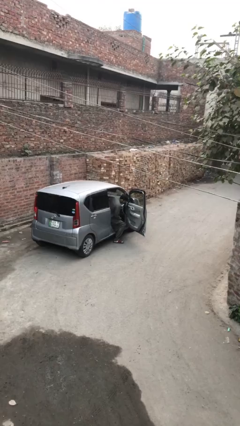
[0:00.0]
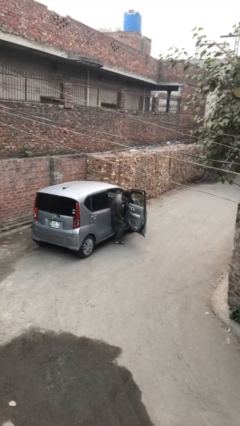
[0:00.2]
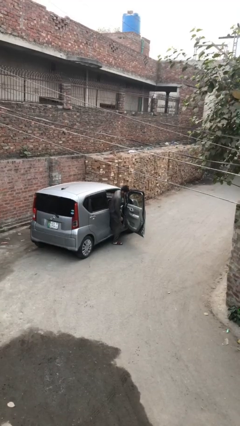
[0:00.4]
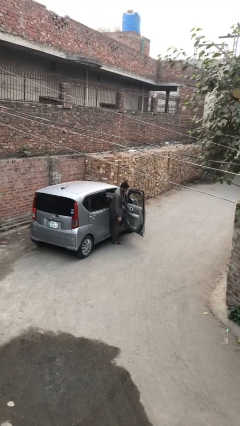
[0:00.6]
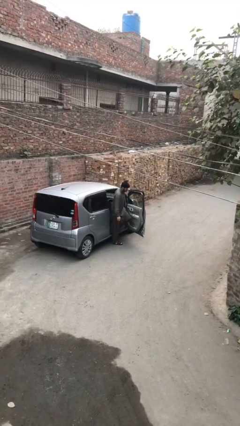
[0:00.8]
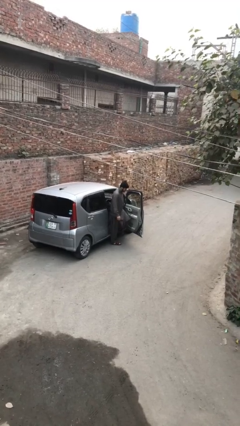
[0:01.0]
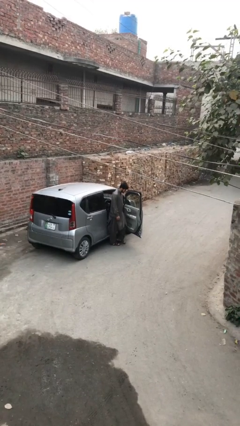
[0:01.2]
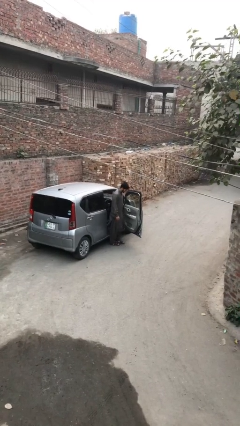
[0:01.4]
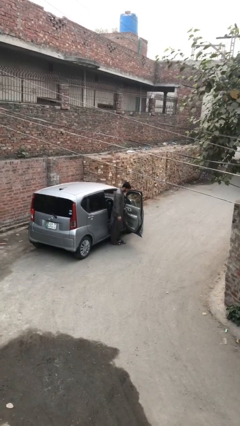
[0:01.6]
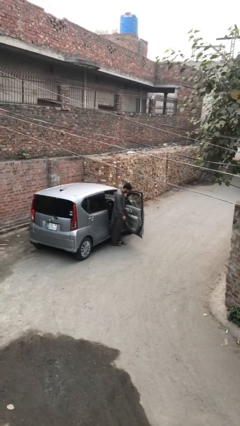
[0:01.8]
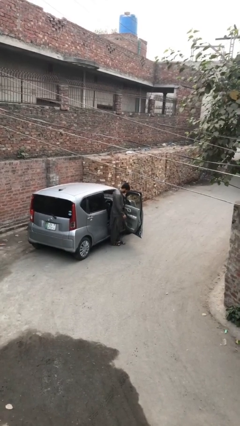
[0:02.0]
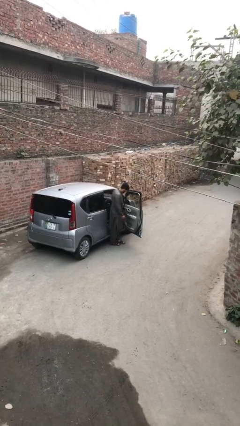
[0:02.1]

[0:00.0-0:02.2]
person exits car

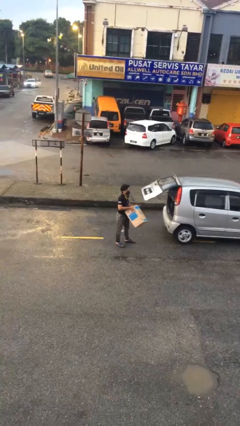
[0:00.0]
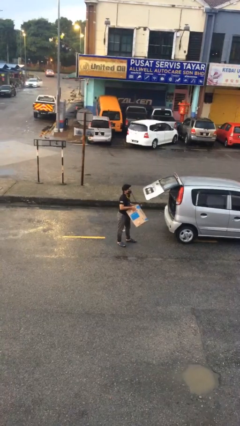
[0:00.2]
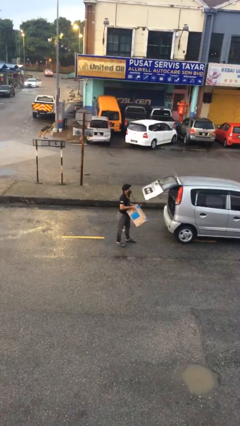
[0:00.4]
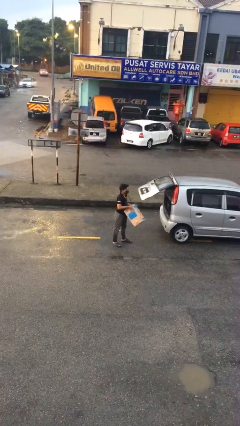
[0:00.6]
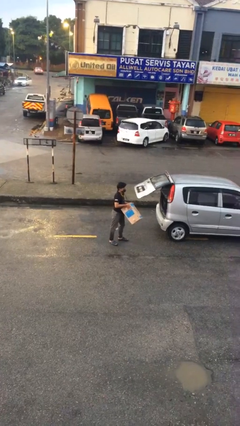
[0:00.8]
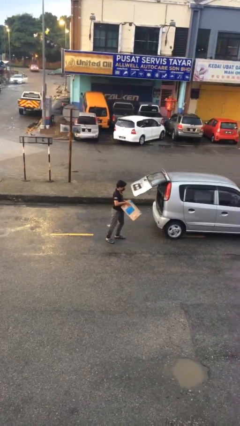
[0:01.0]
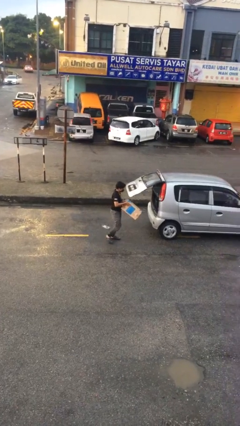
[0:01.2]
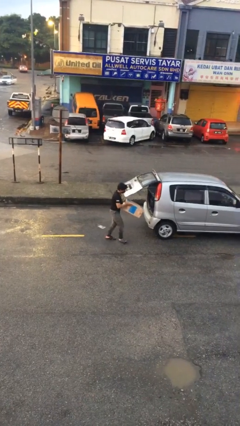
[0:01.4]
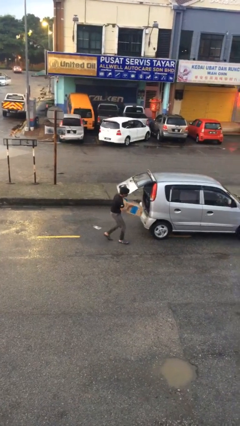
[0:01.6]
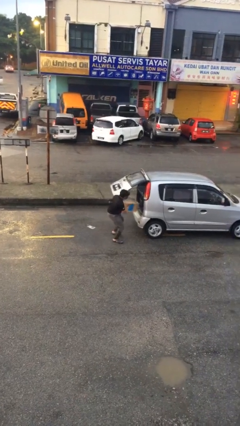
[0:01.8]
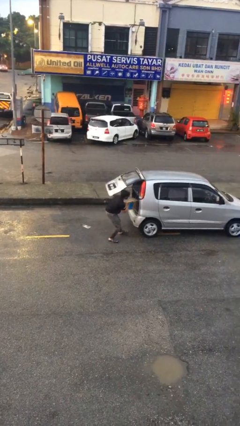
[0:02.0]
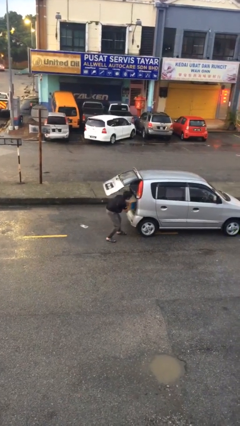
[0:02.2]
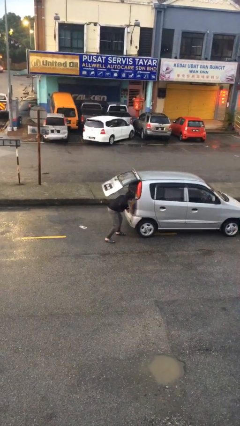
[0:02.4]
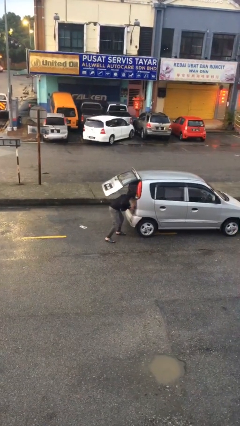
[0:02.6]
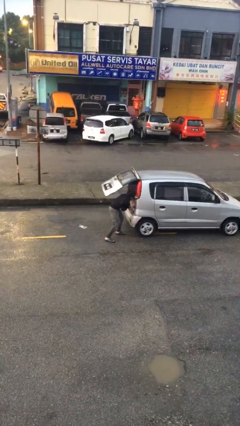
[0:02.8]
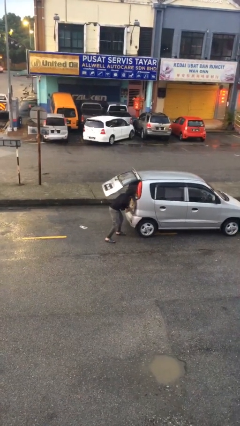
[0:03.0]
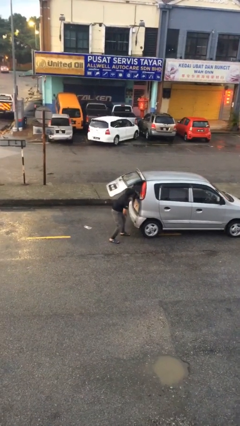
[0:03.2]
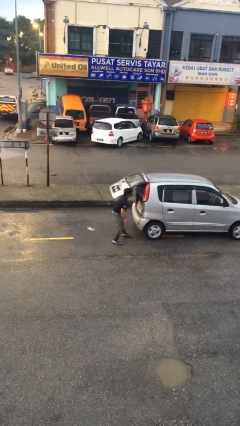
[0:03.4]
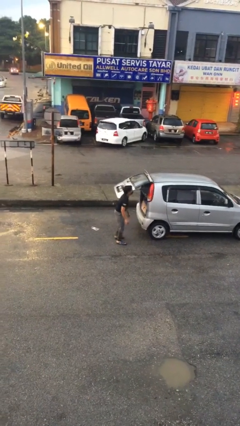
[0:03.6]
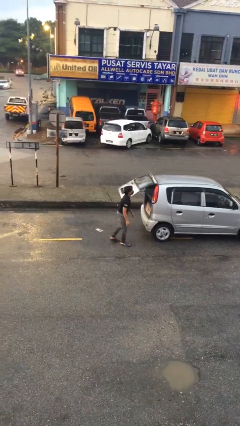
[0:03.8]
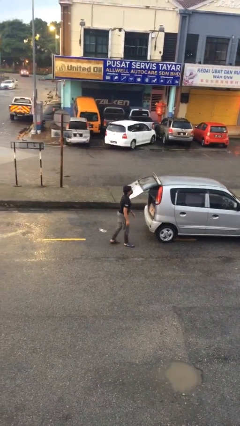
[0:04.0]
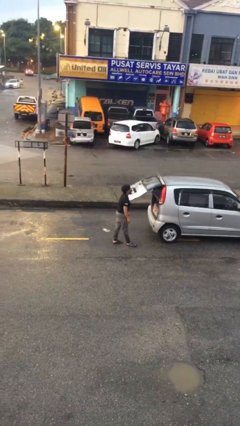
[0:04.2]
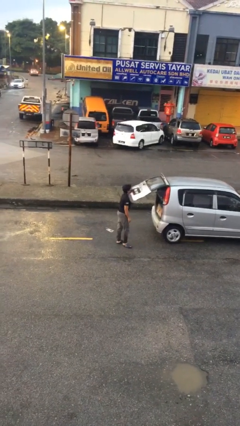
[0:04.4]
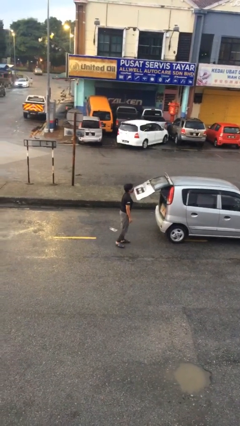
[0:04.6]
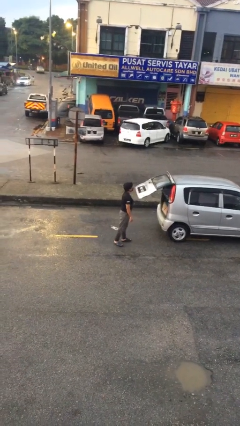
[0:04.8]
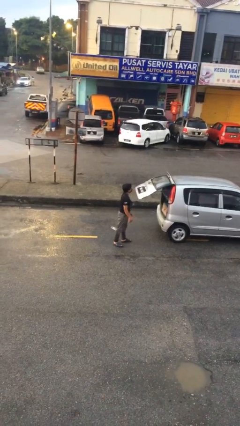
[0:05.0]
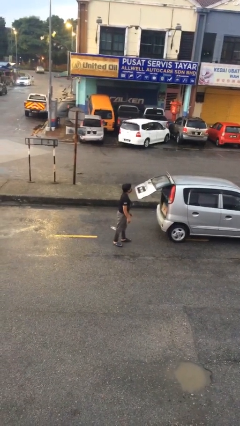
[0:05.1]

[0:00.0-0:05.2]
person loads car

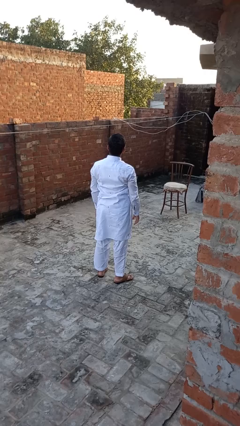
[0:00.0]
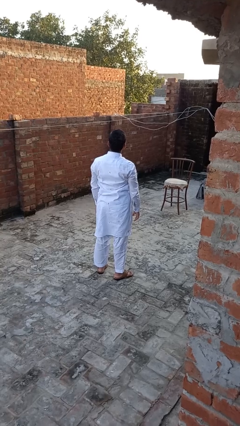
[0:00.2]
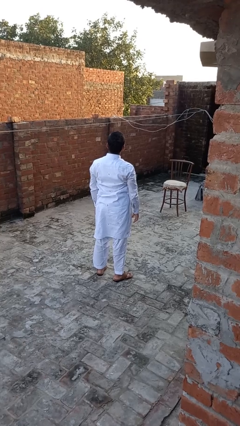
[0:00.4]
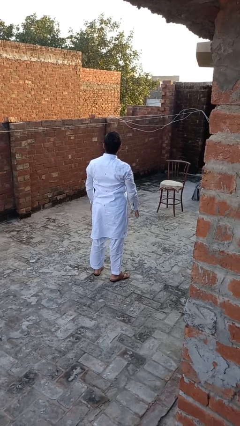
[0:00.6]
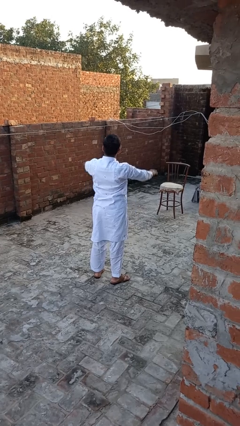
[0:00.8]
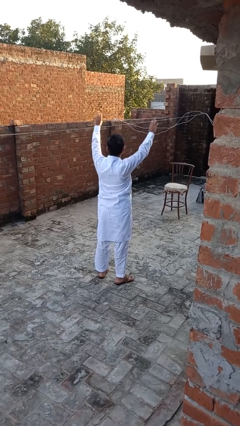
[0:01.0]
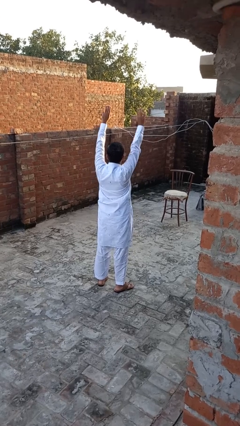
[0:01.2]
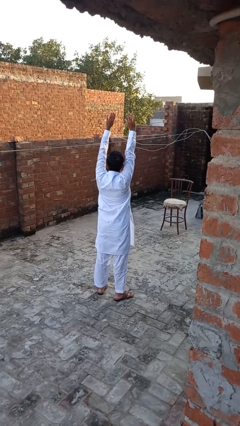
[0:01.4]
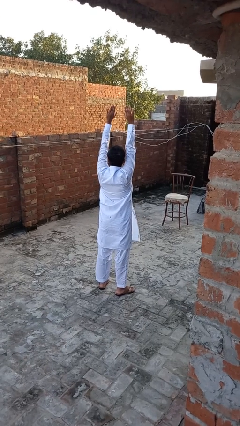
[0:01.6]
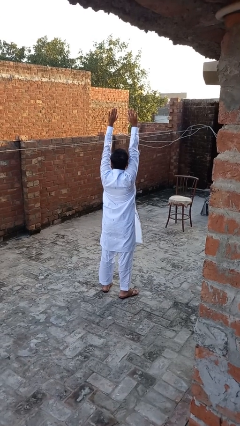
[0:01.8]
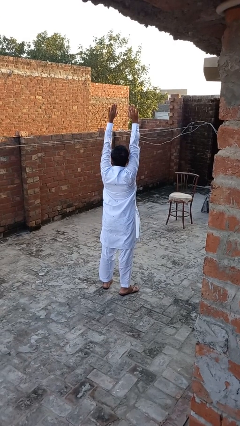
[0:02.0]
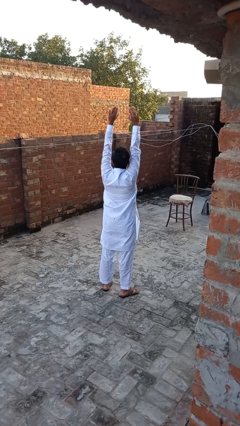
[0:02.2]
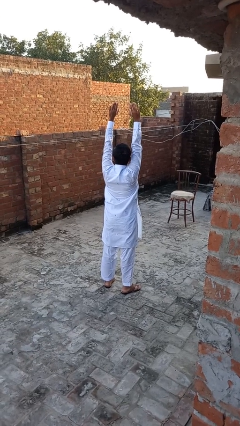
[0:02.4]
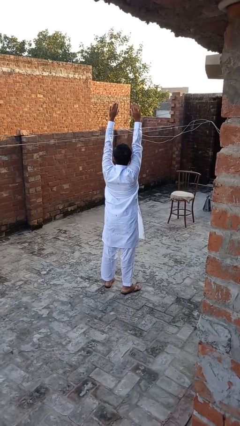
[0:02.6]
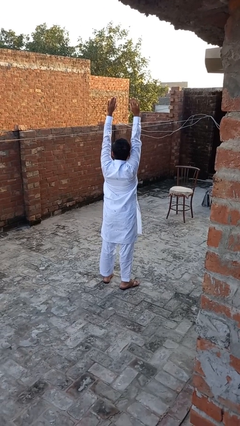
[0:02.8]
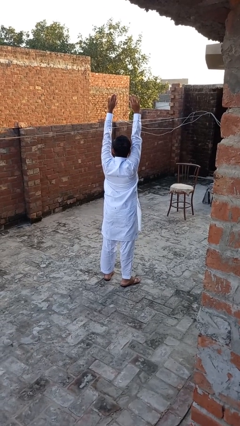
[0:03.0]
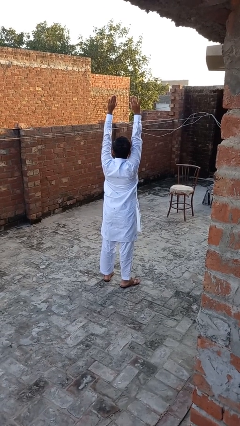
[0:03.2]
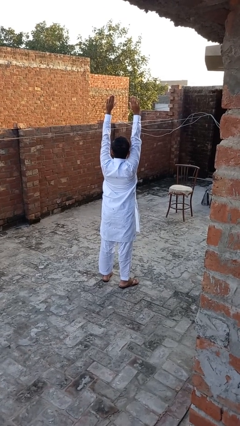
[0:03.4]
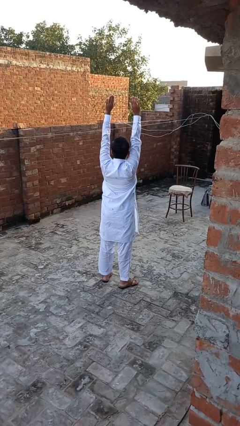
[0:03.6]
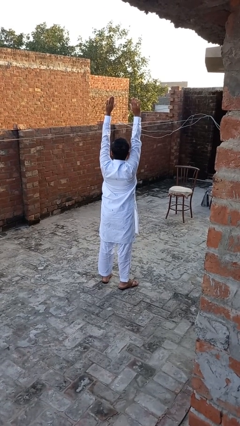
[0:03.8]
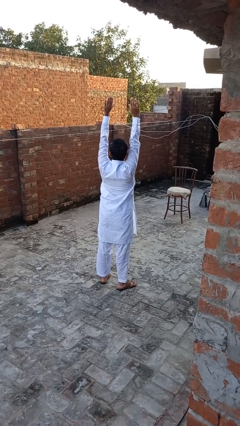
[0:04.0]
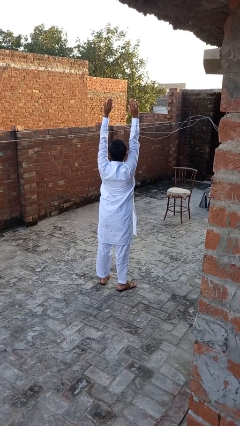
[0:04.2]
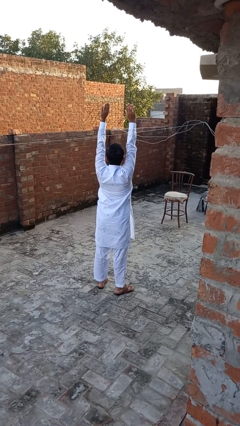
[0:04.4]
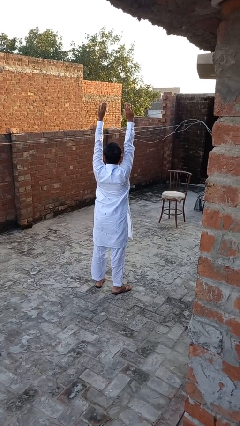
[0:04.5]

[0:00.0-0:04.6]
person gestures swipe up

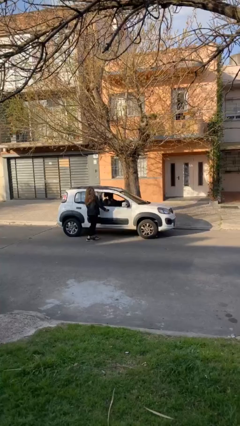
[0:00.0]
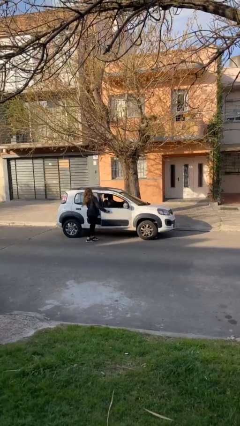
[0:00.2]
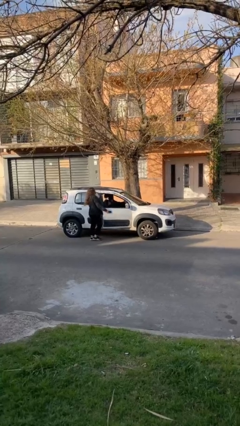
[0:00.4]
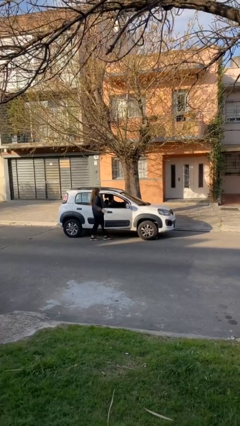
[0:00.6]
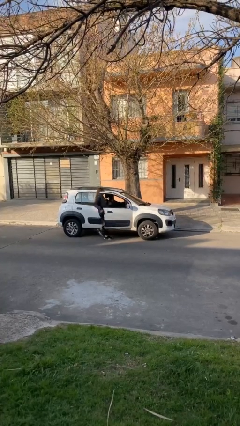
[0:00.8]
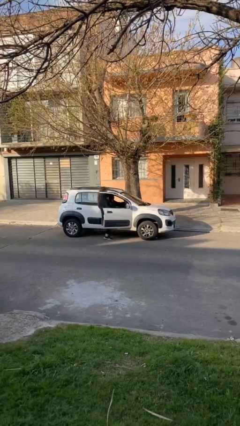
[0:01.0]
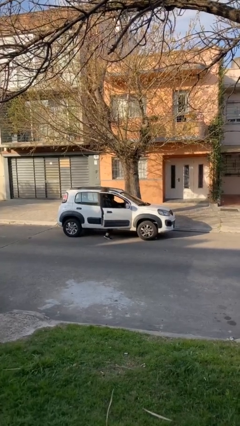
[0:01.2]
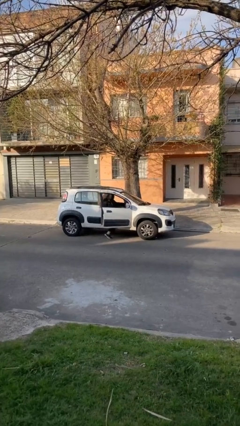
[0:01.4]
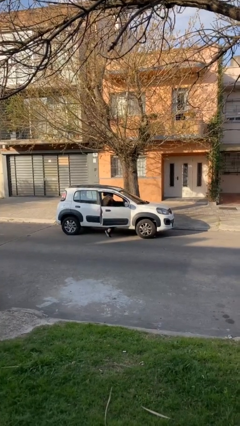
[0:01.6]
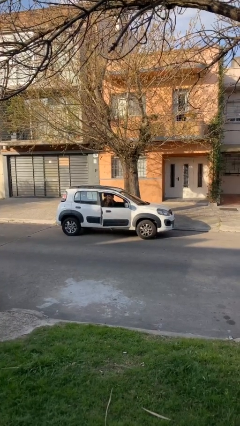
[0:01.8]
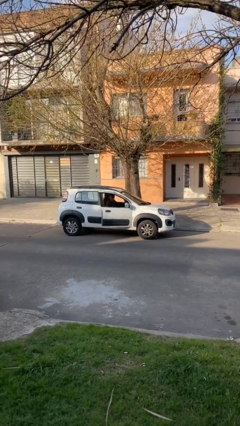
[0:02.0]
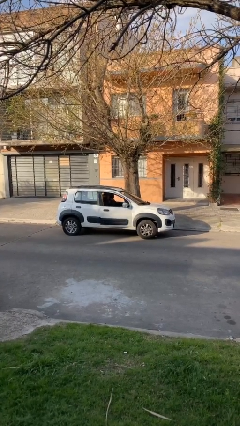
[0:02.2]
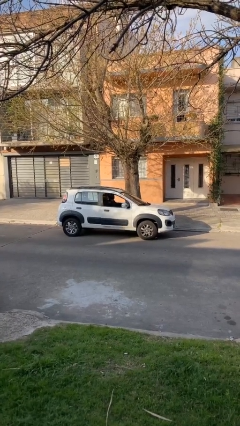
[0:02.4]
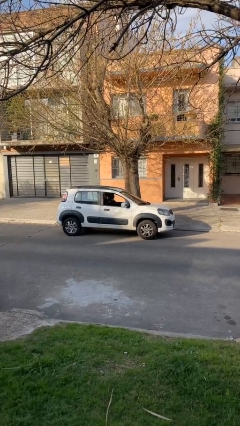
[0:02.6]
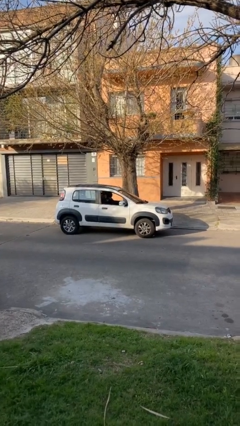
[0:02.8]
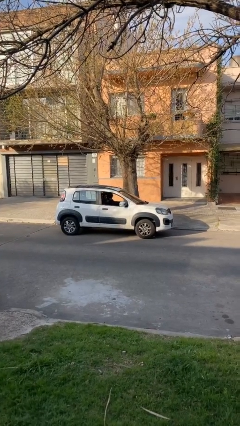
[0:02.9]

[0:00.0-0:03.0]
car picks up person

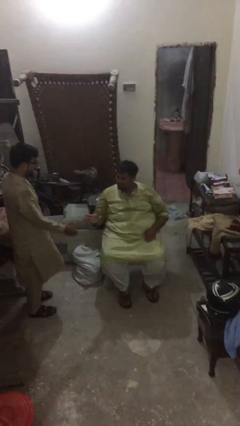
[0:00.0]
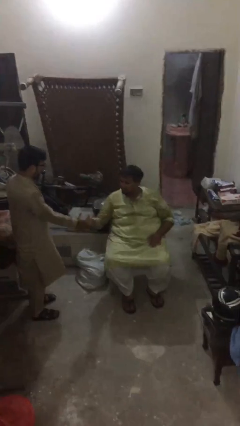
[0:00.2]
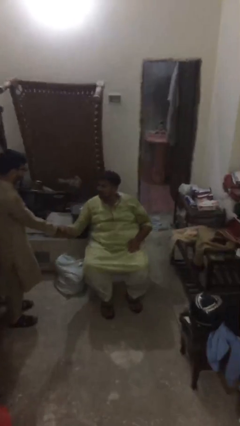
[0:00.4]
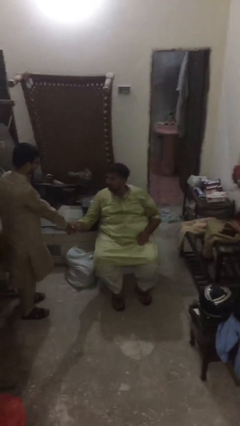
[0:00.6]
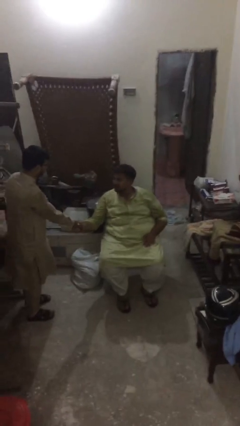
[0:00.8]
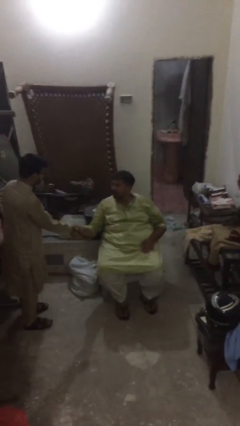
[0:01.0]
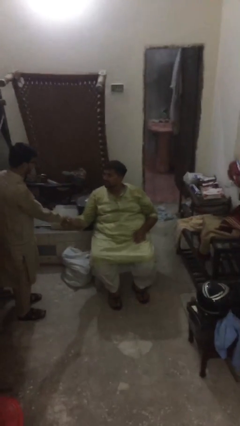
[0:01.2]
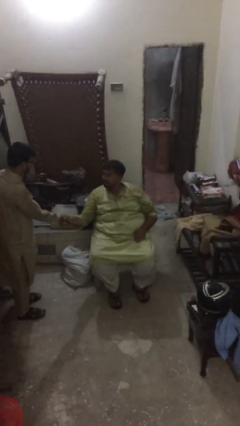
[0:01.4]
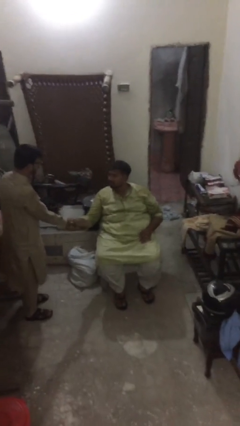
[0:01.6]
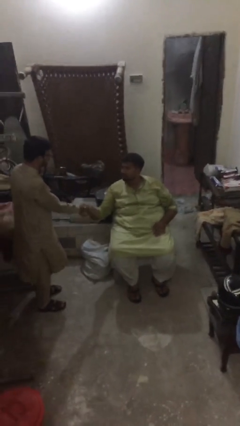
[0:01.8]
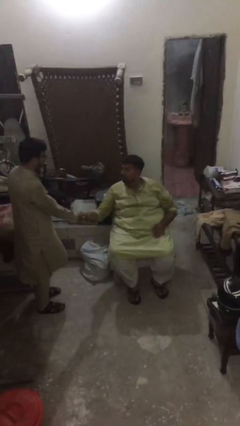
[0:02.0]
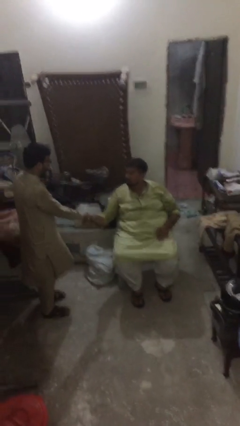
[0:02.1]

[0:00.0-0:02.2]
person shakes hand
